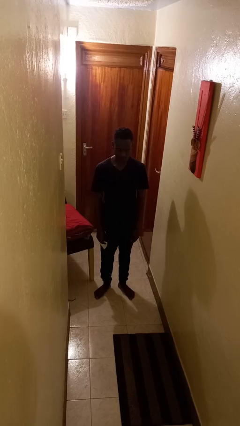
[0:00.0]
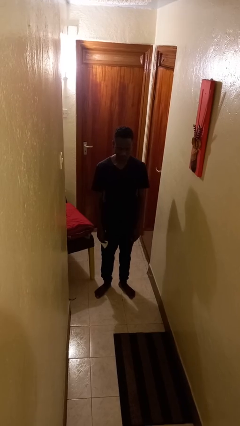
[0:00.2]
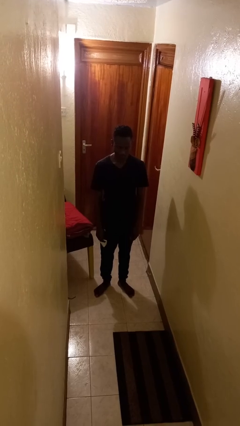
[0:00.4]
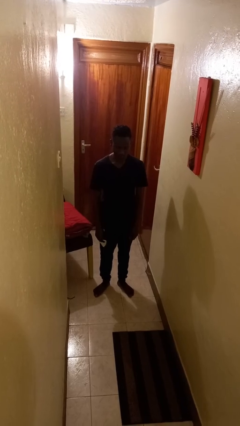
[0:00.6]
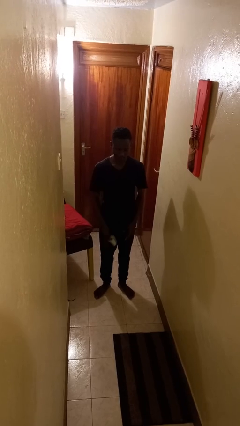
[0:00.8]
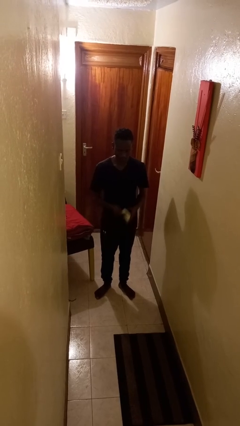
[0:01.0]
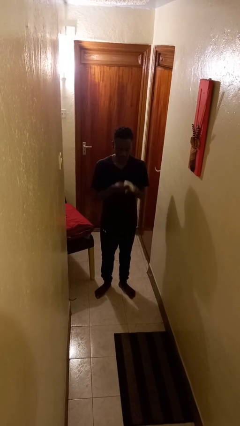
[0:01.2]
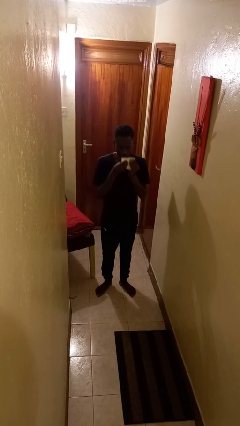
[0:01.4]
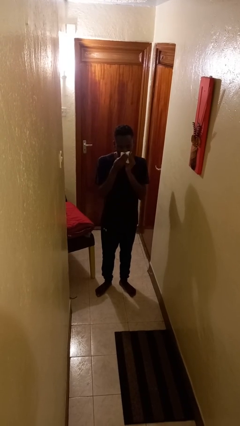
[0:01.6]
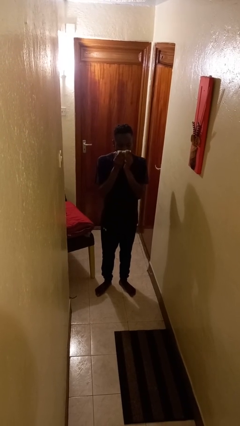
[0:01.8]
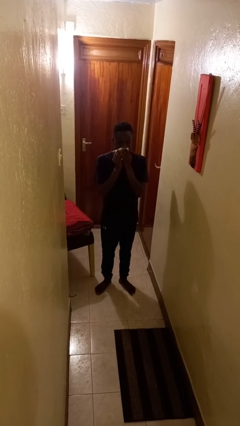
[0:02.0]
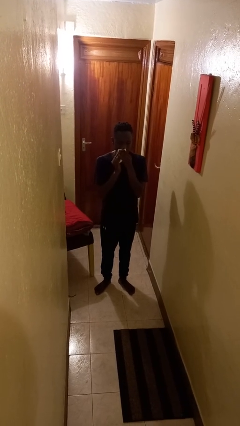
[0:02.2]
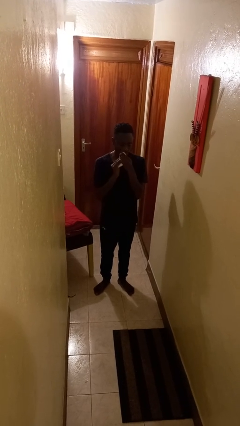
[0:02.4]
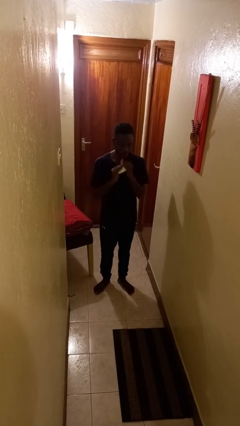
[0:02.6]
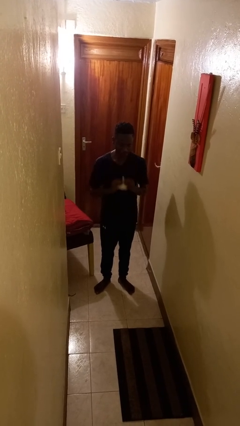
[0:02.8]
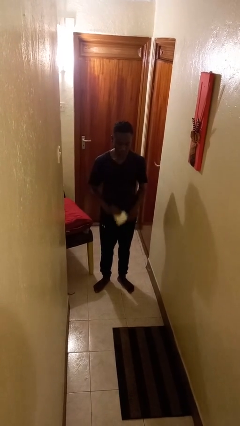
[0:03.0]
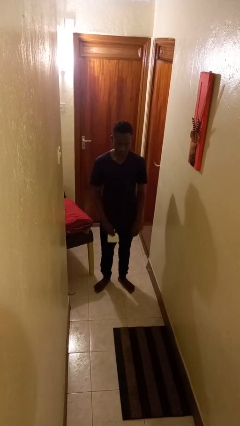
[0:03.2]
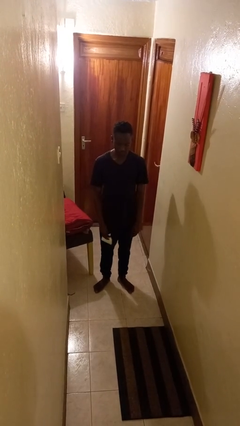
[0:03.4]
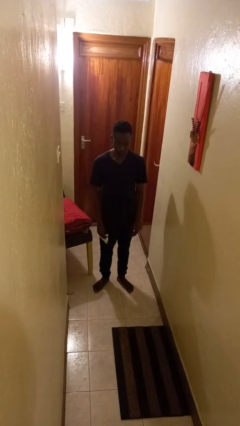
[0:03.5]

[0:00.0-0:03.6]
person wipes mouth with napkin

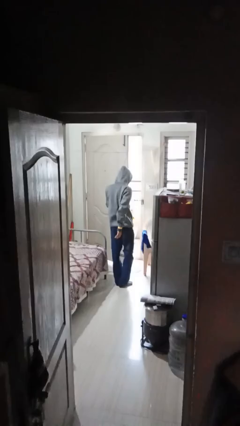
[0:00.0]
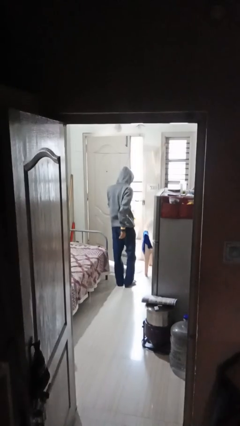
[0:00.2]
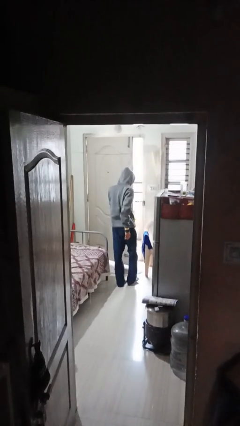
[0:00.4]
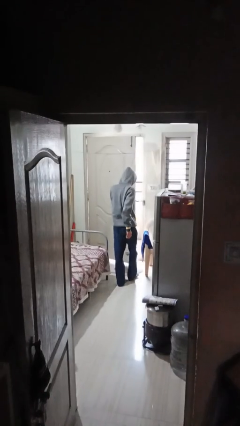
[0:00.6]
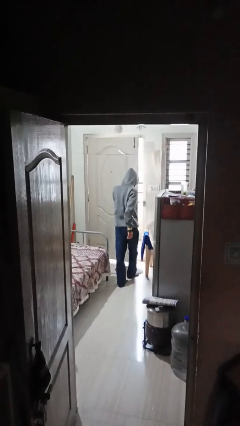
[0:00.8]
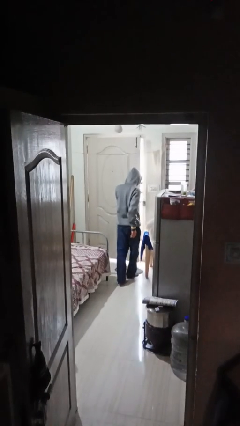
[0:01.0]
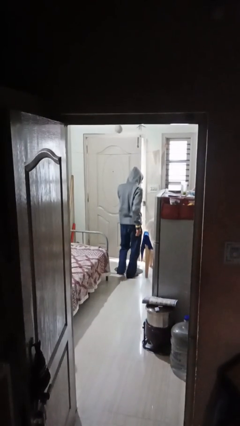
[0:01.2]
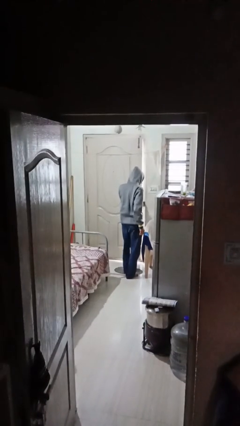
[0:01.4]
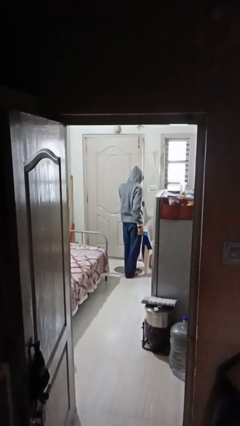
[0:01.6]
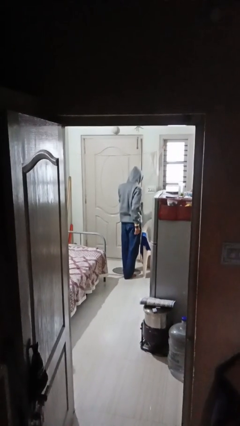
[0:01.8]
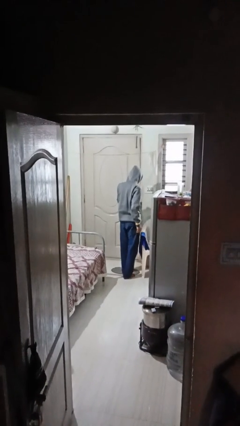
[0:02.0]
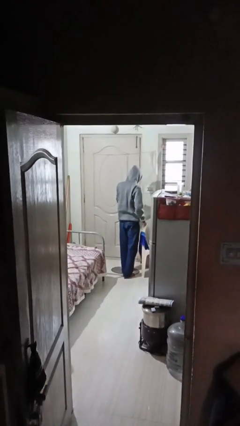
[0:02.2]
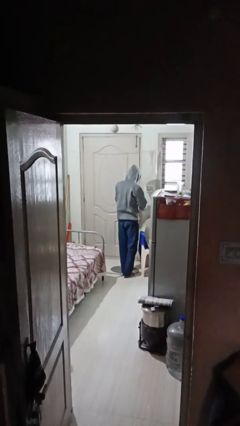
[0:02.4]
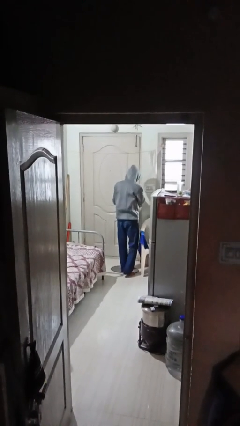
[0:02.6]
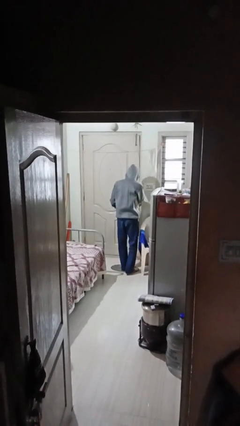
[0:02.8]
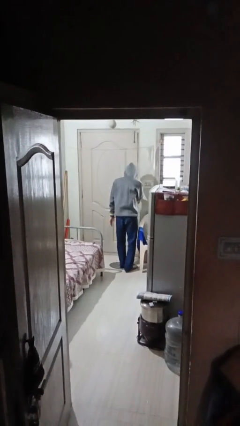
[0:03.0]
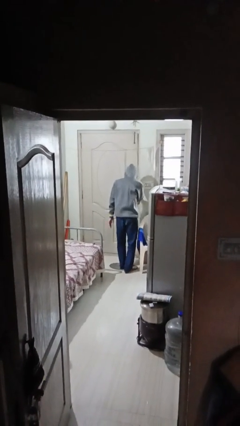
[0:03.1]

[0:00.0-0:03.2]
person closes facility door

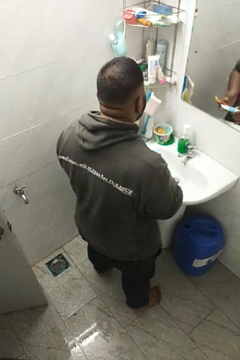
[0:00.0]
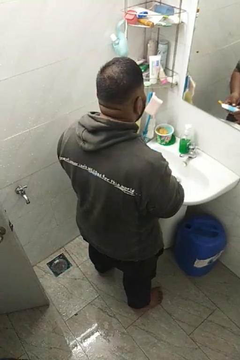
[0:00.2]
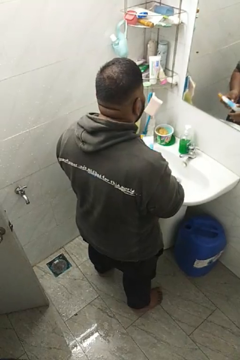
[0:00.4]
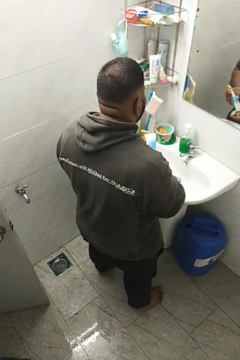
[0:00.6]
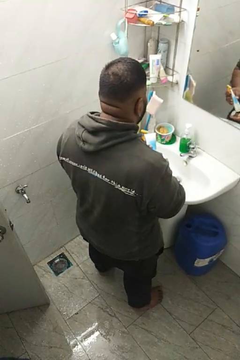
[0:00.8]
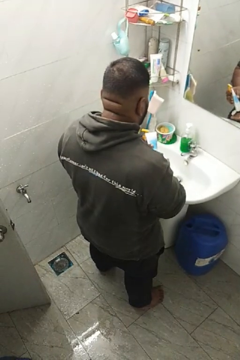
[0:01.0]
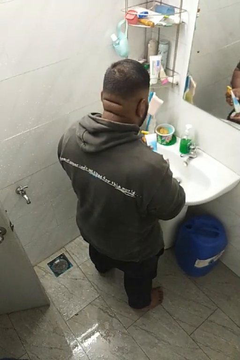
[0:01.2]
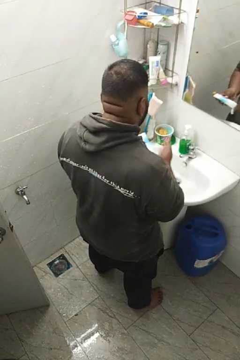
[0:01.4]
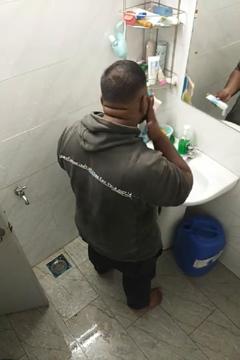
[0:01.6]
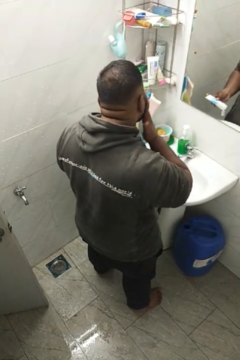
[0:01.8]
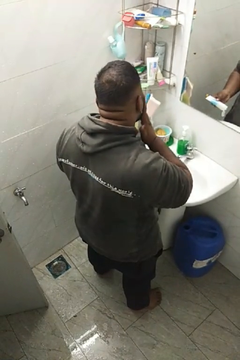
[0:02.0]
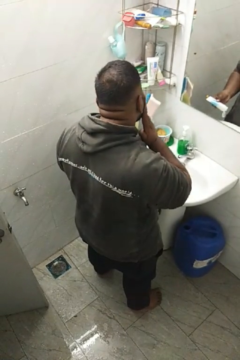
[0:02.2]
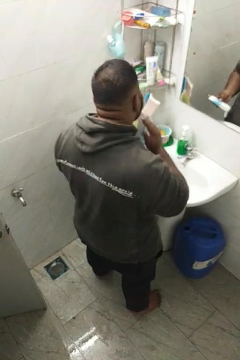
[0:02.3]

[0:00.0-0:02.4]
person applies shaving cream

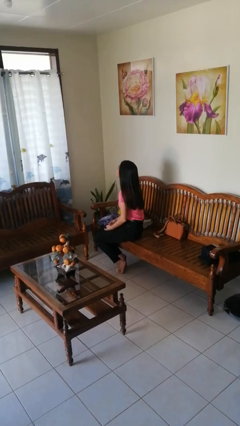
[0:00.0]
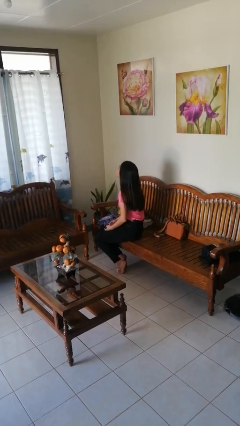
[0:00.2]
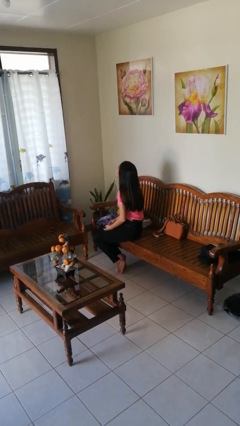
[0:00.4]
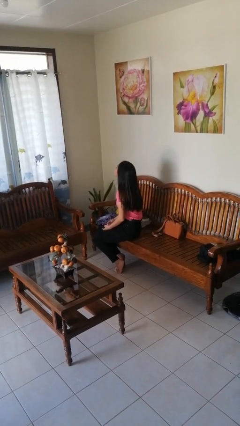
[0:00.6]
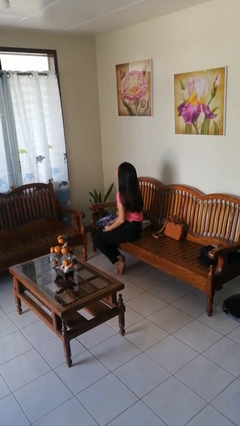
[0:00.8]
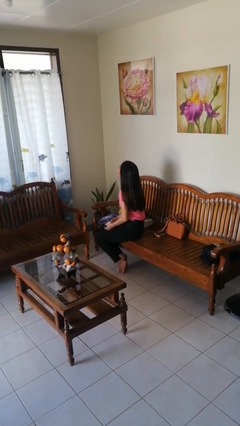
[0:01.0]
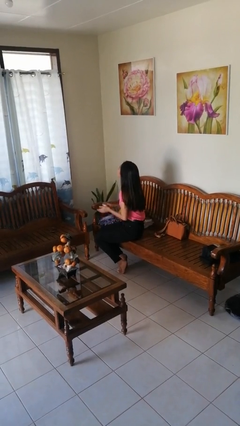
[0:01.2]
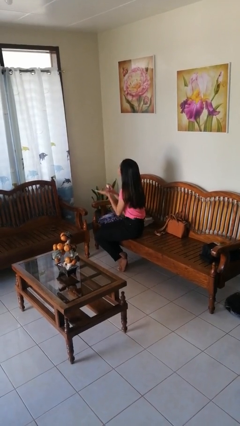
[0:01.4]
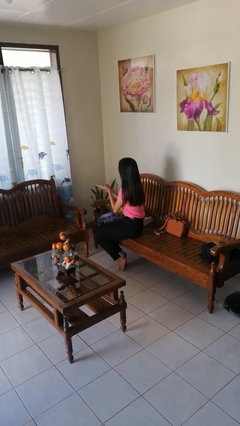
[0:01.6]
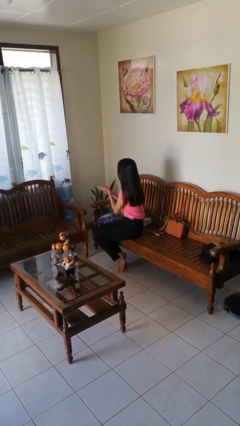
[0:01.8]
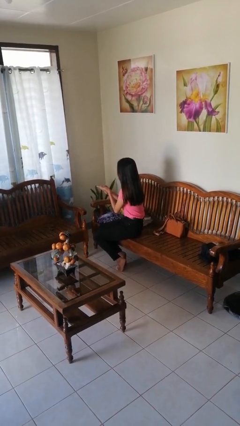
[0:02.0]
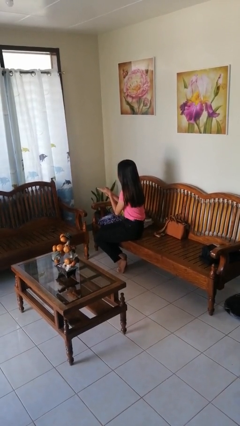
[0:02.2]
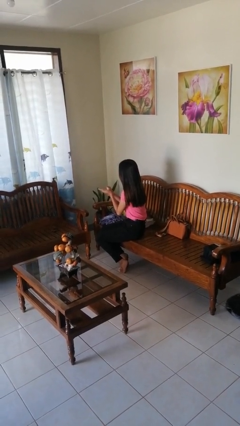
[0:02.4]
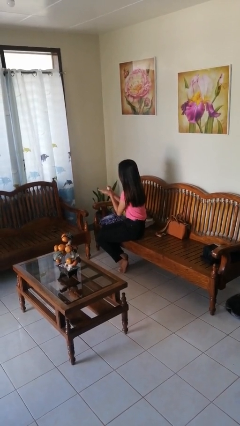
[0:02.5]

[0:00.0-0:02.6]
person sprays from bottle

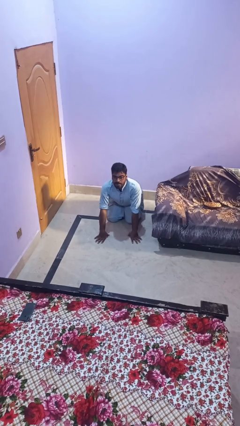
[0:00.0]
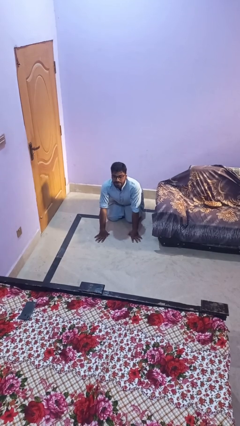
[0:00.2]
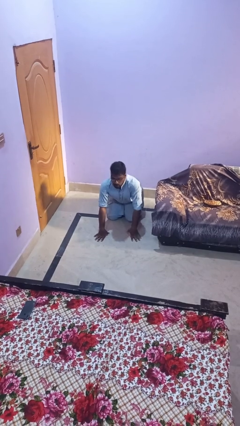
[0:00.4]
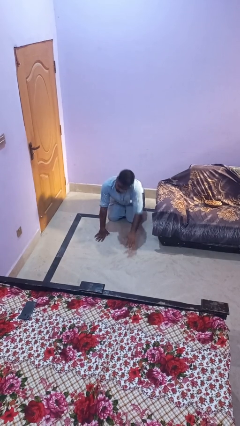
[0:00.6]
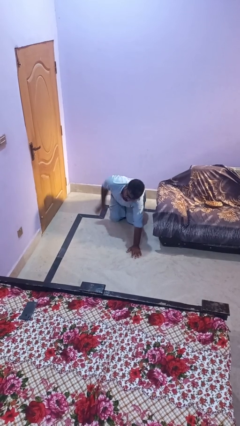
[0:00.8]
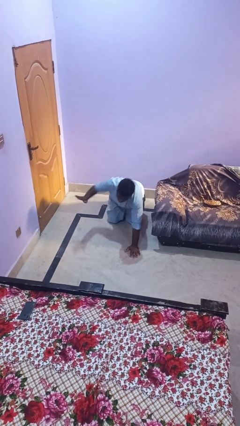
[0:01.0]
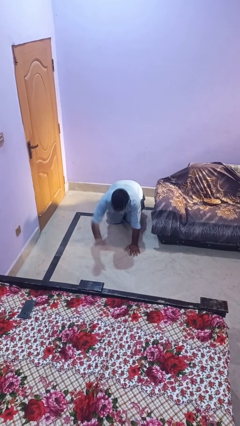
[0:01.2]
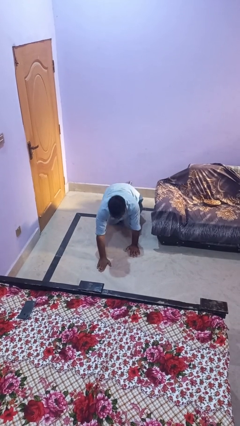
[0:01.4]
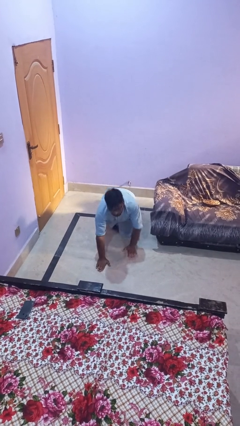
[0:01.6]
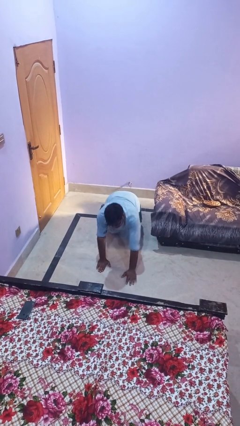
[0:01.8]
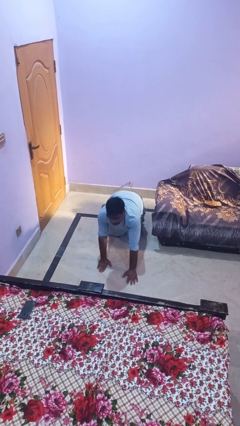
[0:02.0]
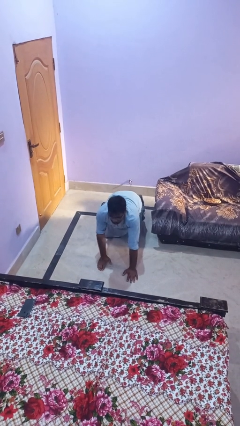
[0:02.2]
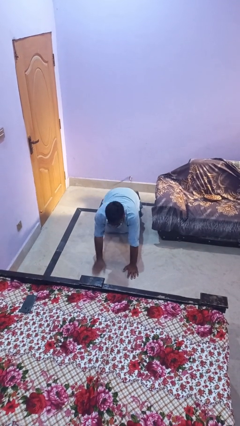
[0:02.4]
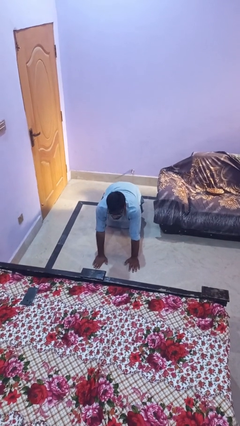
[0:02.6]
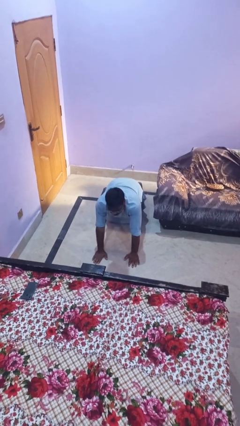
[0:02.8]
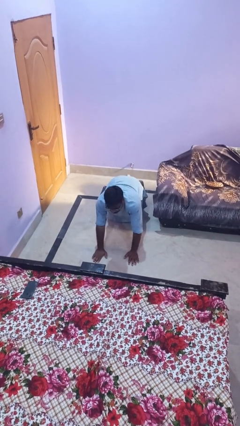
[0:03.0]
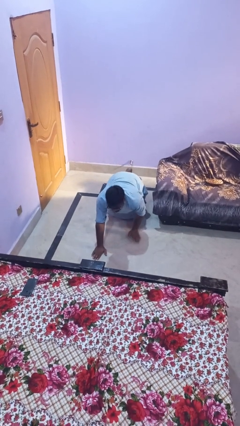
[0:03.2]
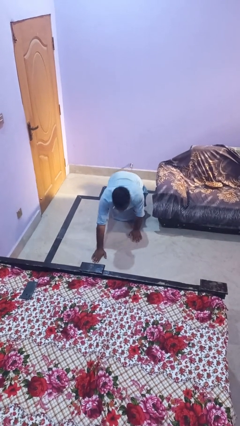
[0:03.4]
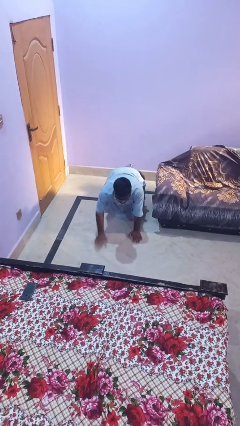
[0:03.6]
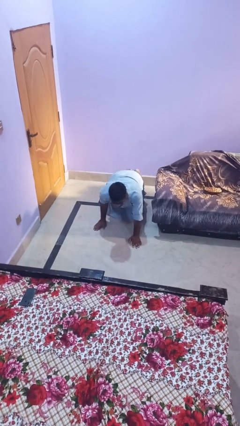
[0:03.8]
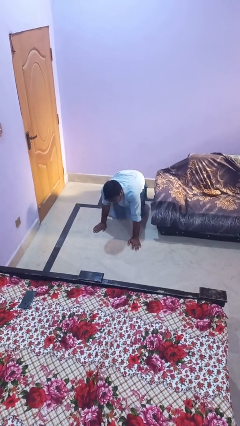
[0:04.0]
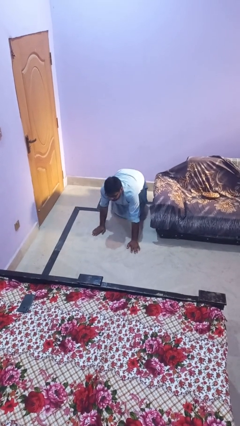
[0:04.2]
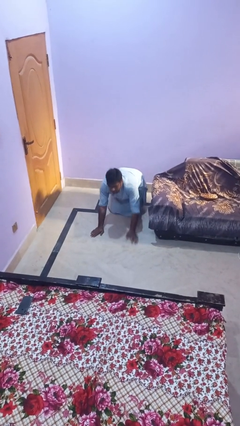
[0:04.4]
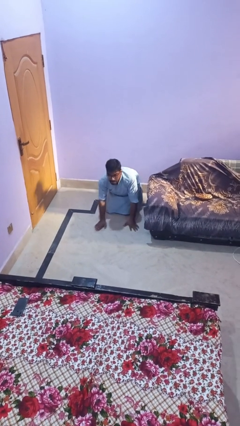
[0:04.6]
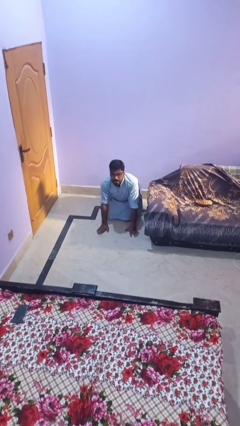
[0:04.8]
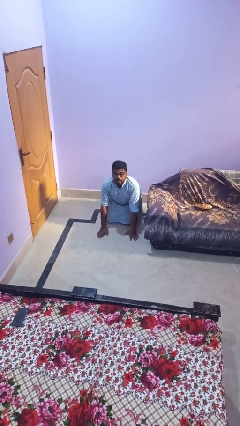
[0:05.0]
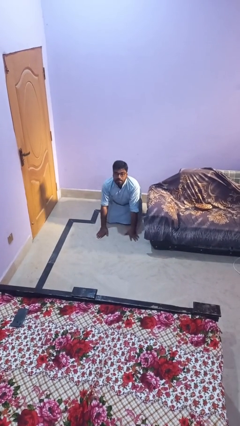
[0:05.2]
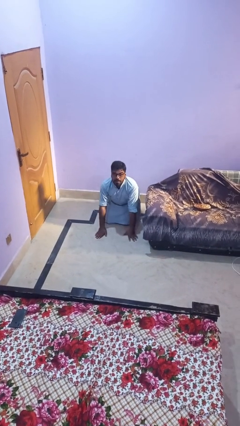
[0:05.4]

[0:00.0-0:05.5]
person crawls

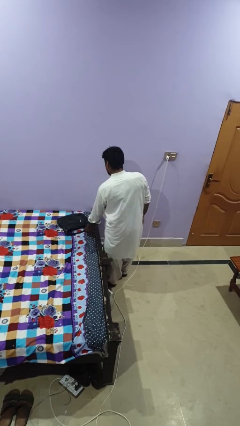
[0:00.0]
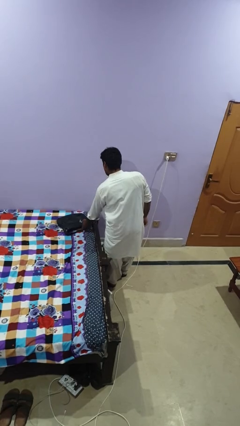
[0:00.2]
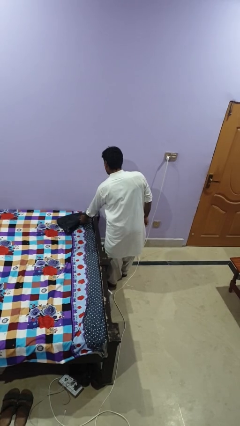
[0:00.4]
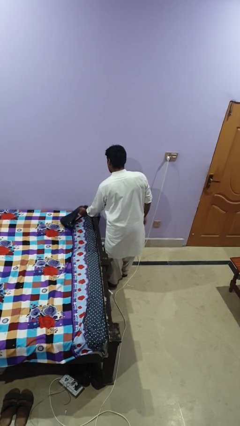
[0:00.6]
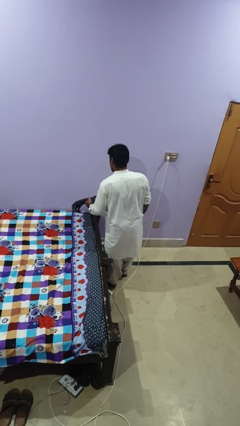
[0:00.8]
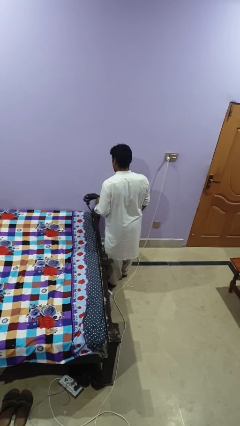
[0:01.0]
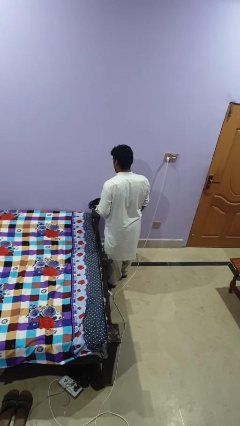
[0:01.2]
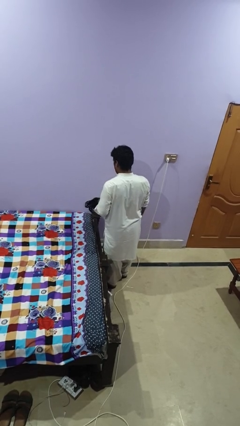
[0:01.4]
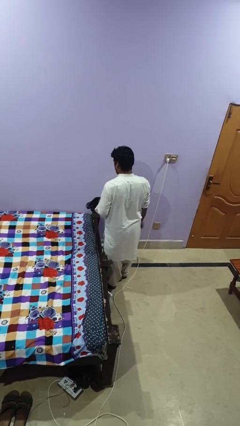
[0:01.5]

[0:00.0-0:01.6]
person picks up object from bed
